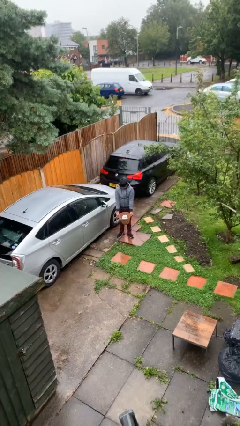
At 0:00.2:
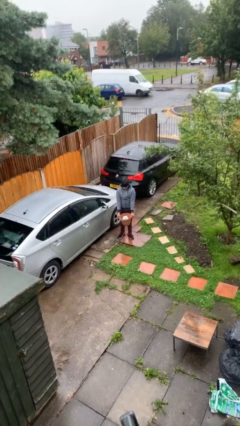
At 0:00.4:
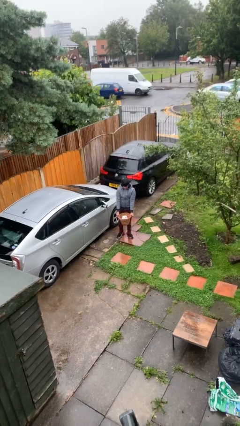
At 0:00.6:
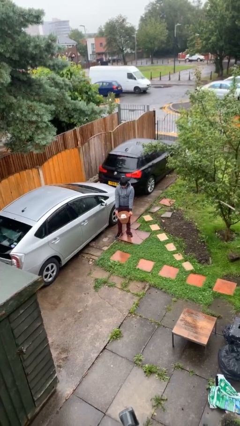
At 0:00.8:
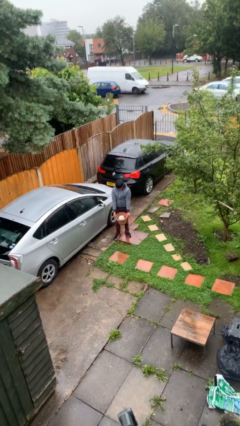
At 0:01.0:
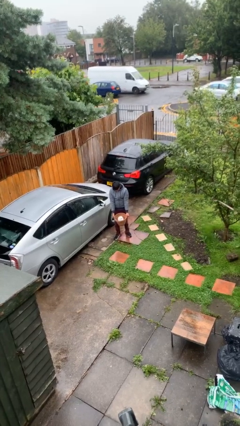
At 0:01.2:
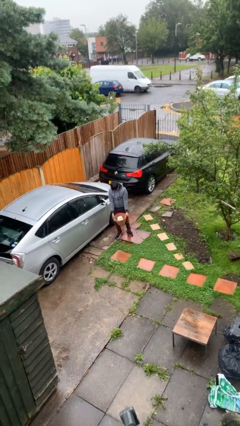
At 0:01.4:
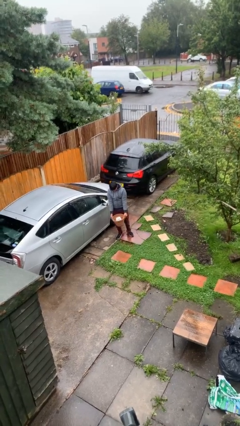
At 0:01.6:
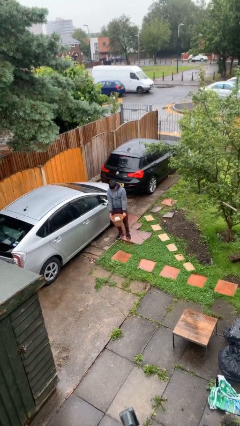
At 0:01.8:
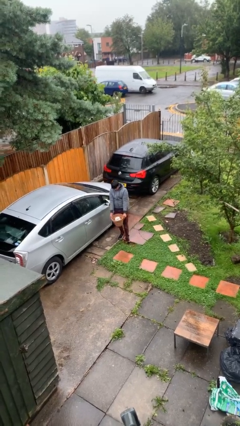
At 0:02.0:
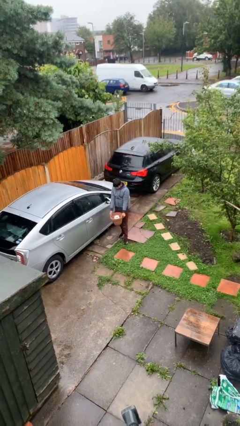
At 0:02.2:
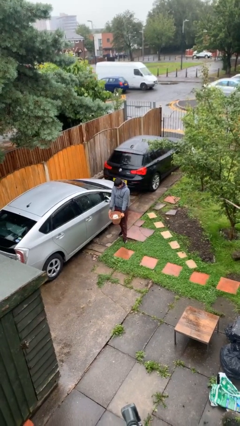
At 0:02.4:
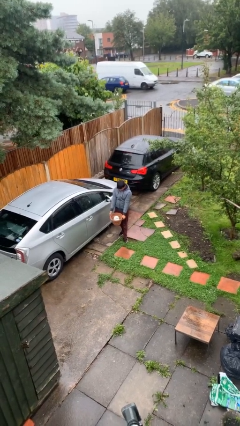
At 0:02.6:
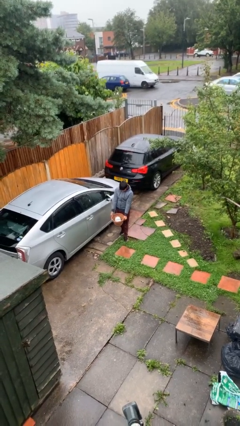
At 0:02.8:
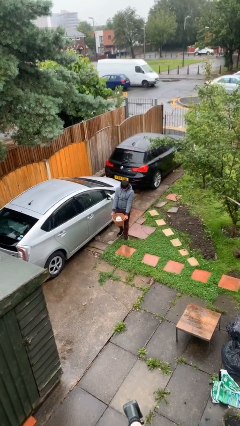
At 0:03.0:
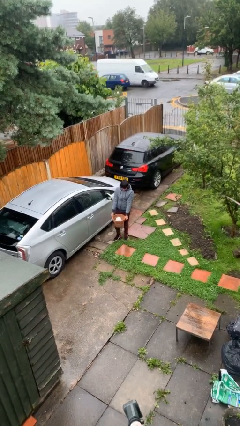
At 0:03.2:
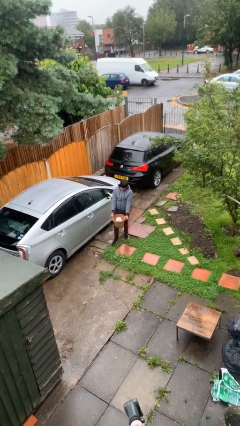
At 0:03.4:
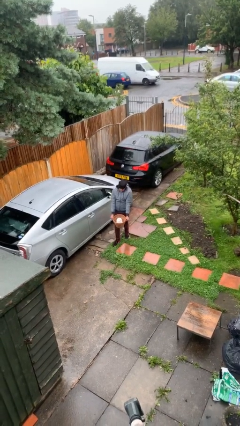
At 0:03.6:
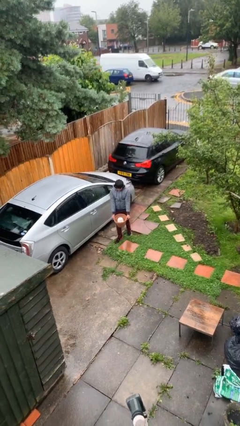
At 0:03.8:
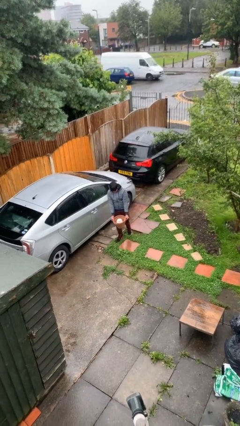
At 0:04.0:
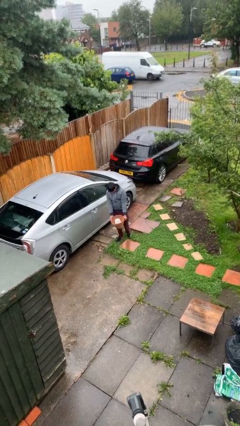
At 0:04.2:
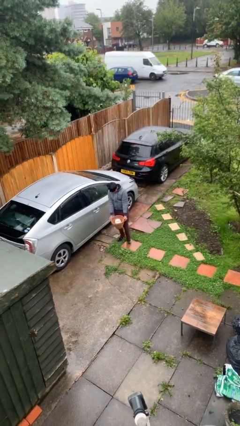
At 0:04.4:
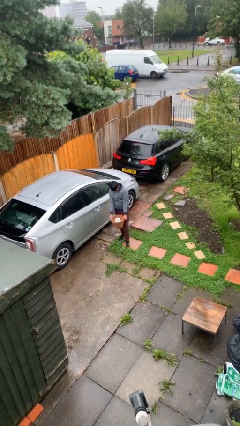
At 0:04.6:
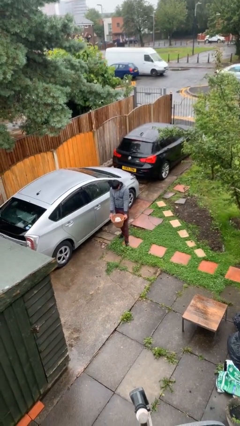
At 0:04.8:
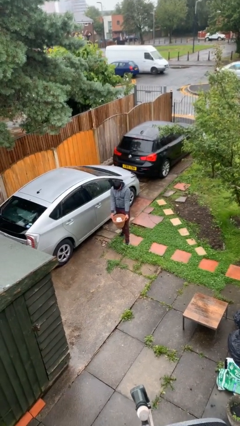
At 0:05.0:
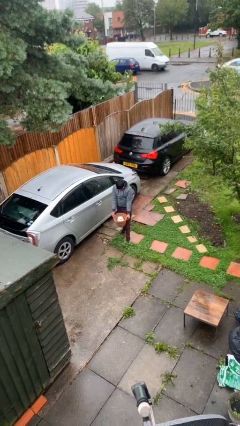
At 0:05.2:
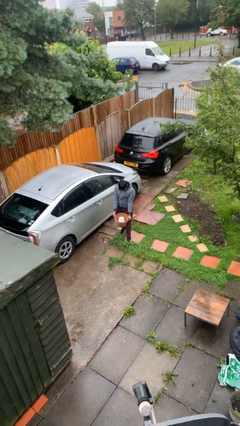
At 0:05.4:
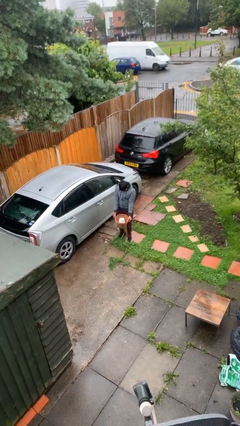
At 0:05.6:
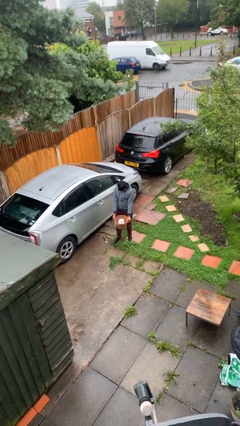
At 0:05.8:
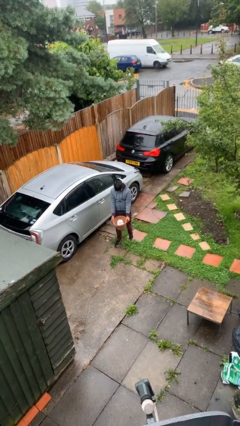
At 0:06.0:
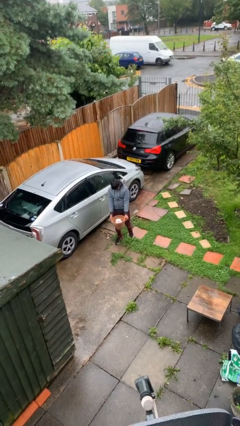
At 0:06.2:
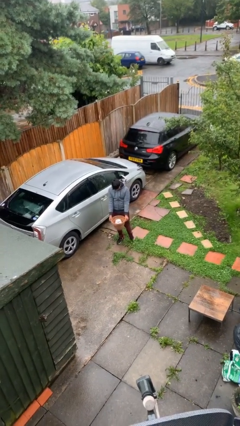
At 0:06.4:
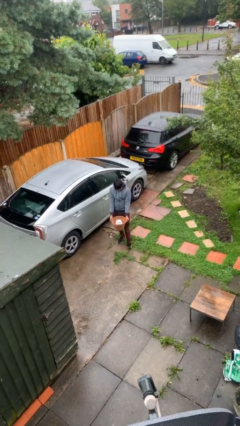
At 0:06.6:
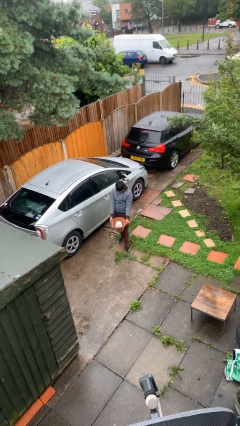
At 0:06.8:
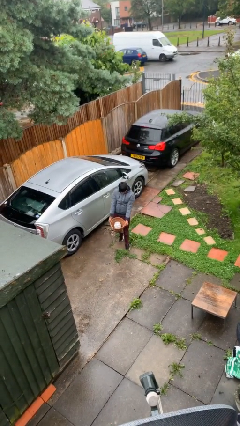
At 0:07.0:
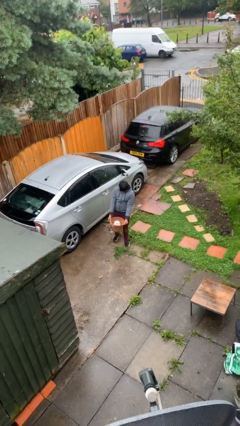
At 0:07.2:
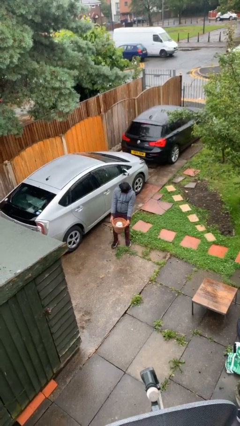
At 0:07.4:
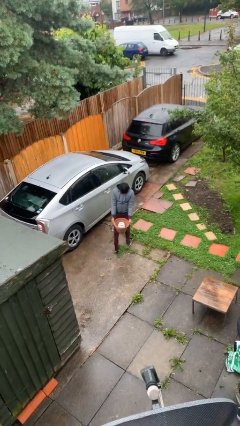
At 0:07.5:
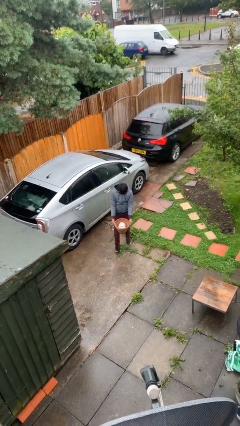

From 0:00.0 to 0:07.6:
person carries heavy object

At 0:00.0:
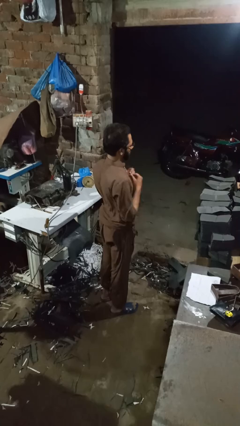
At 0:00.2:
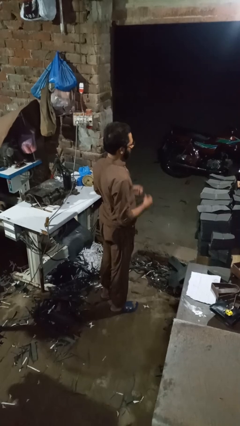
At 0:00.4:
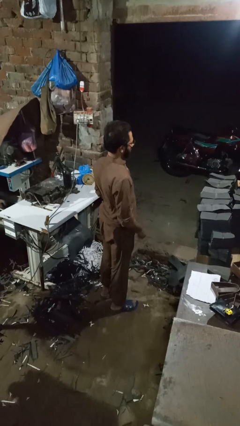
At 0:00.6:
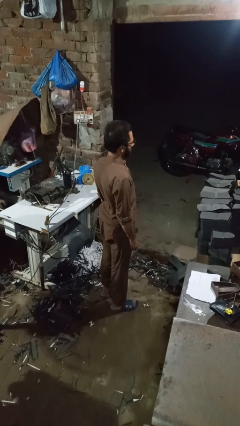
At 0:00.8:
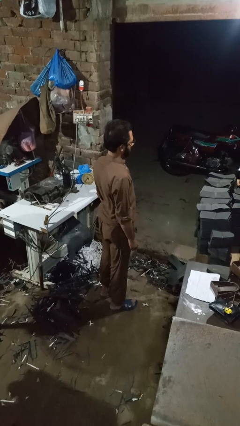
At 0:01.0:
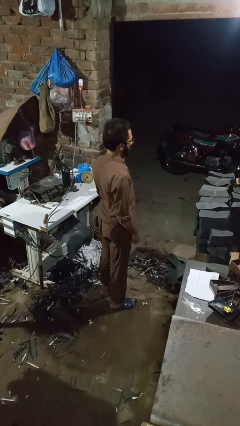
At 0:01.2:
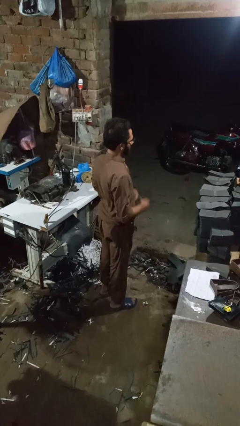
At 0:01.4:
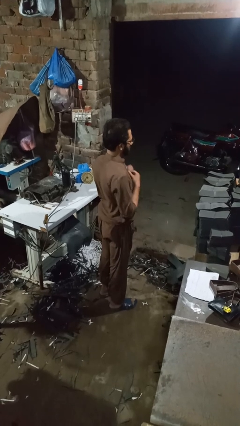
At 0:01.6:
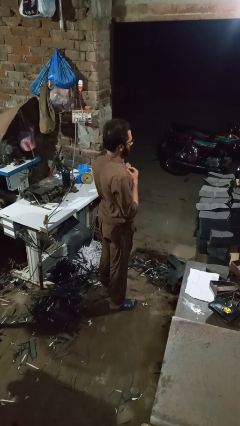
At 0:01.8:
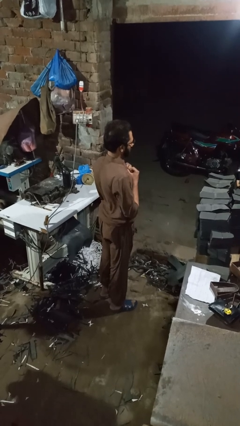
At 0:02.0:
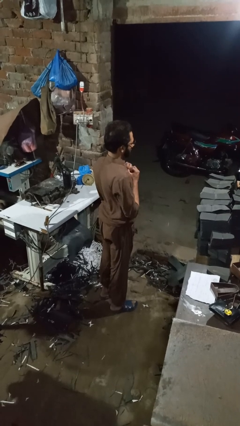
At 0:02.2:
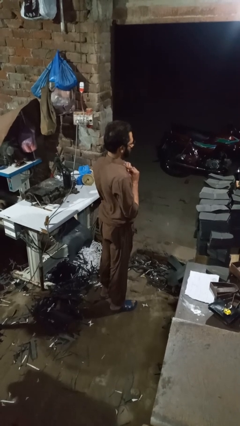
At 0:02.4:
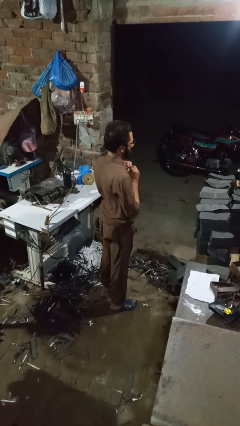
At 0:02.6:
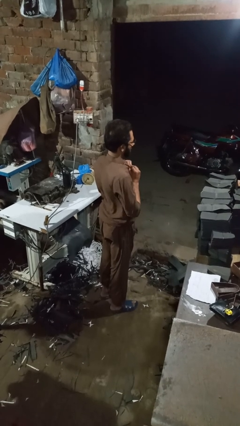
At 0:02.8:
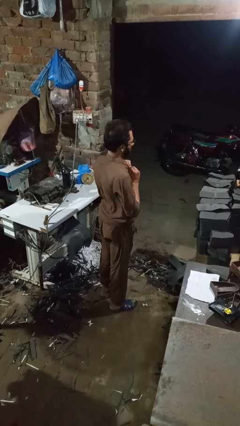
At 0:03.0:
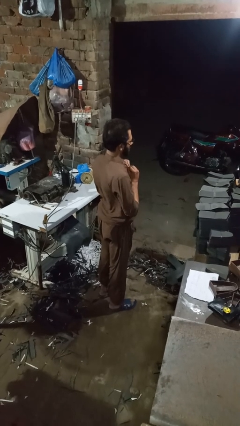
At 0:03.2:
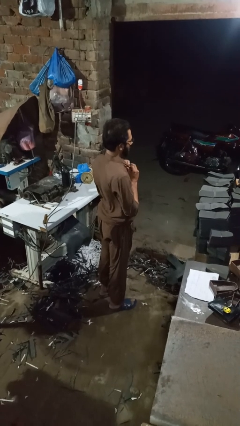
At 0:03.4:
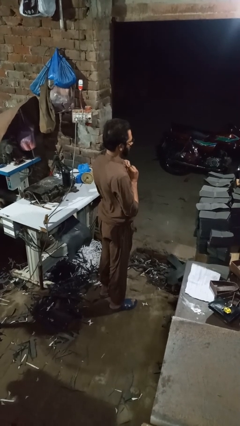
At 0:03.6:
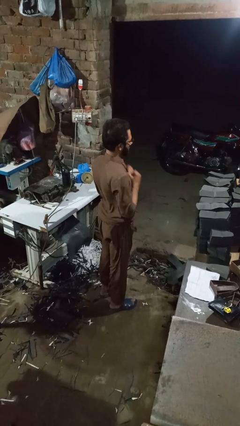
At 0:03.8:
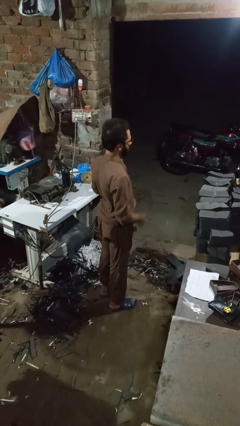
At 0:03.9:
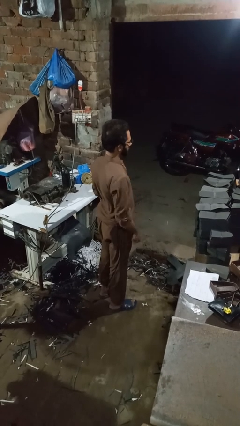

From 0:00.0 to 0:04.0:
person buttons shirt

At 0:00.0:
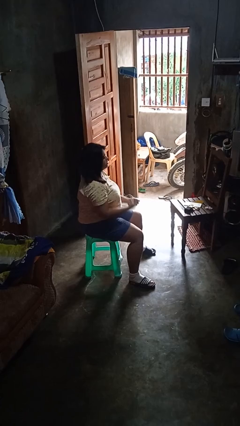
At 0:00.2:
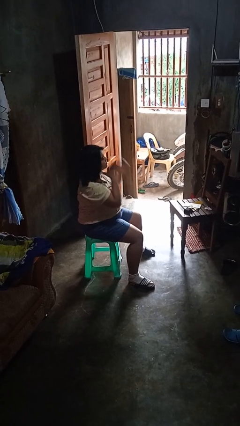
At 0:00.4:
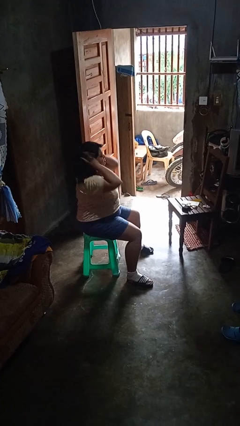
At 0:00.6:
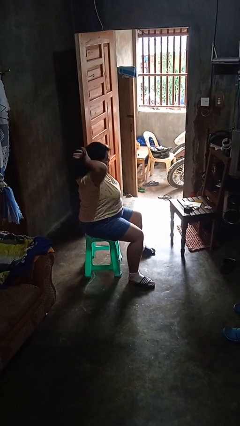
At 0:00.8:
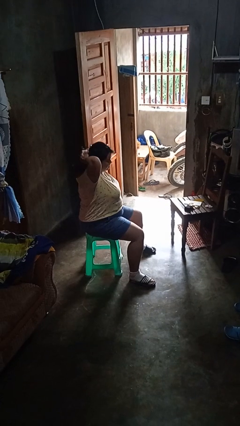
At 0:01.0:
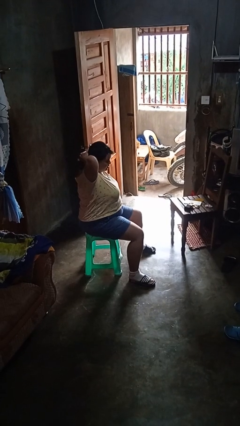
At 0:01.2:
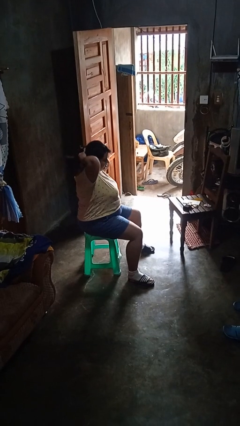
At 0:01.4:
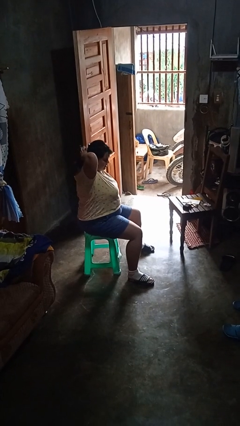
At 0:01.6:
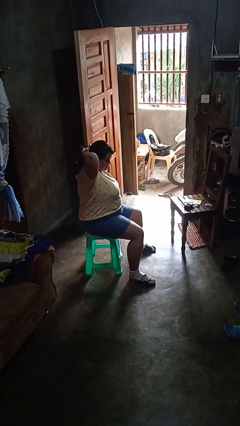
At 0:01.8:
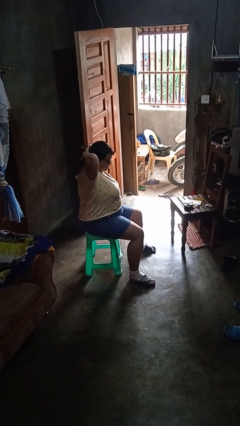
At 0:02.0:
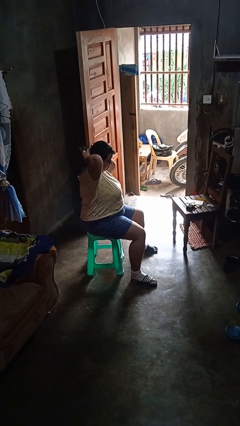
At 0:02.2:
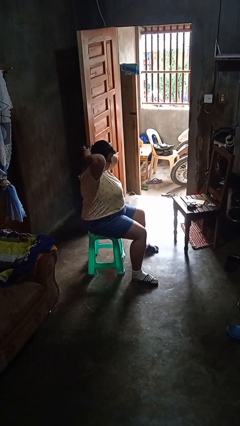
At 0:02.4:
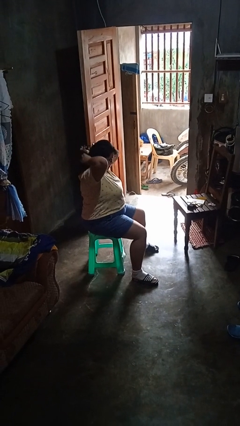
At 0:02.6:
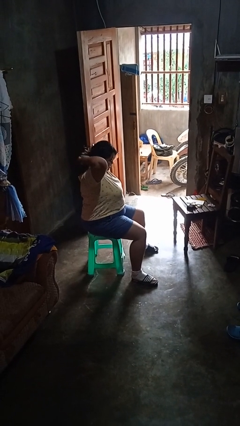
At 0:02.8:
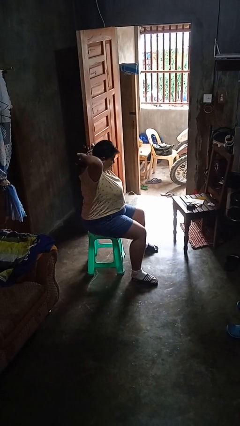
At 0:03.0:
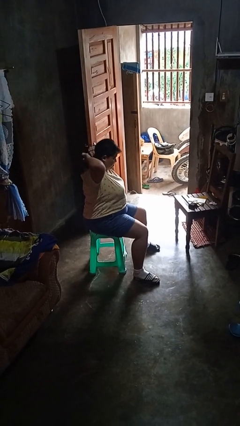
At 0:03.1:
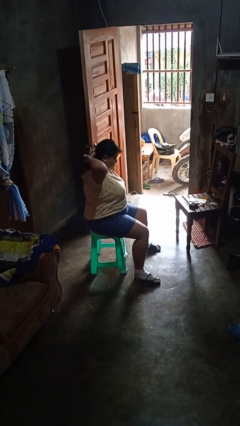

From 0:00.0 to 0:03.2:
person puts hair in ponytail

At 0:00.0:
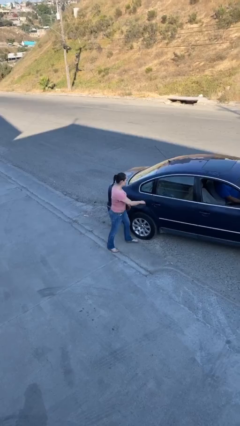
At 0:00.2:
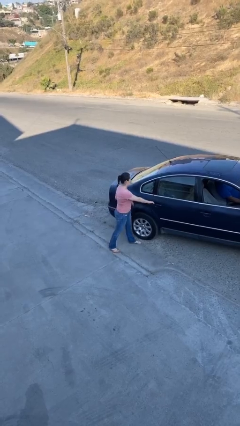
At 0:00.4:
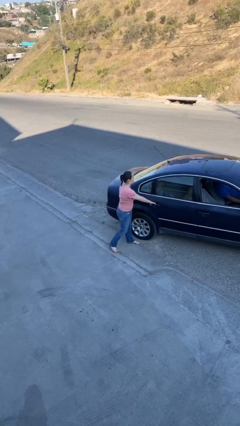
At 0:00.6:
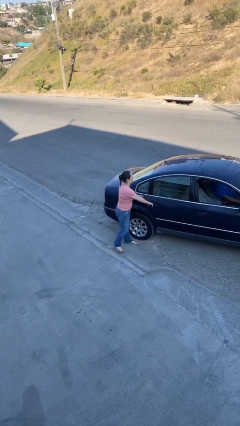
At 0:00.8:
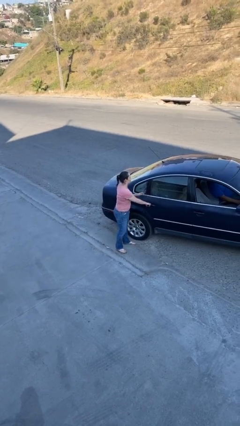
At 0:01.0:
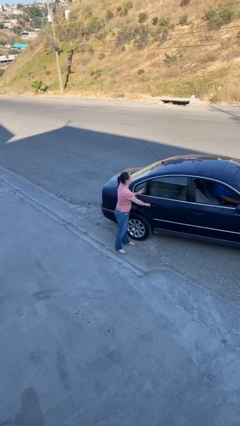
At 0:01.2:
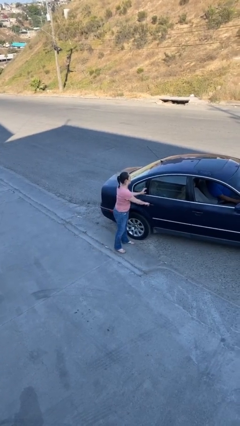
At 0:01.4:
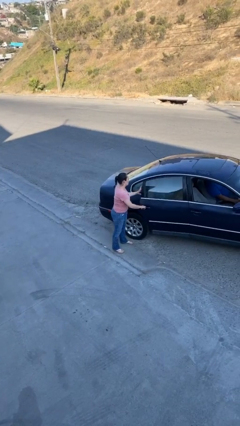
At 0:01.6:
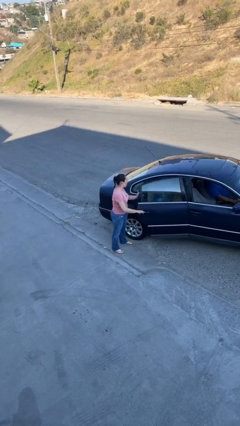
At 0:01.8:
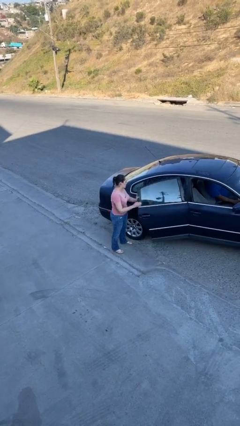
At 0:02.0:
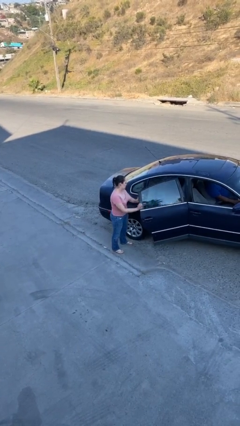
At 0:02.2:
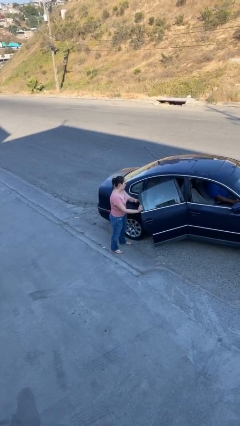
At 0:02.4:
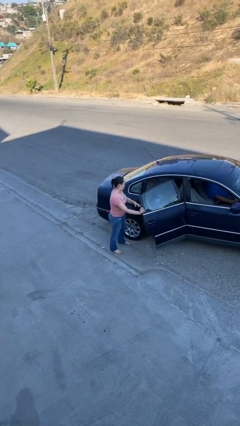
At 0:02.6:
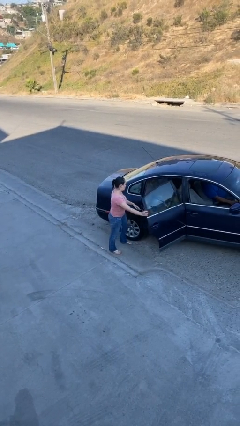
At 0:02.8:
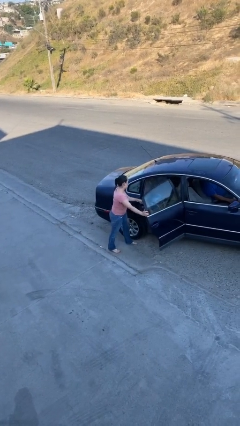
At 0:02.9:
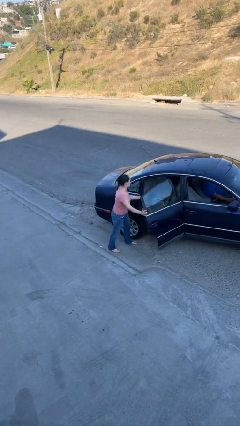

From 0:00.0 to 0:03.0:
person opens car door
